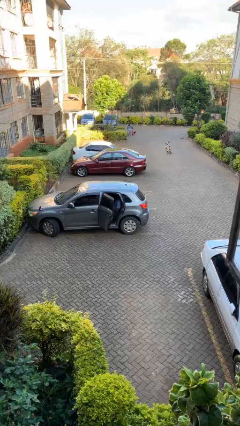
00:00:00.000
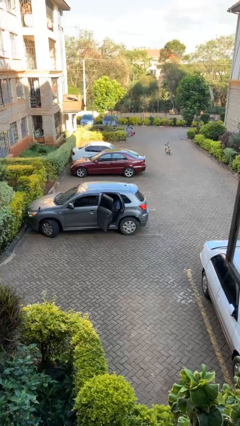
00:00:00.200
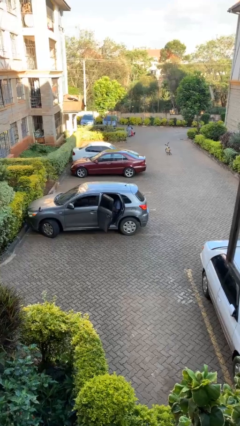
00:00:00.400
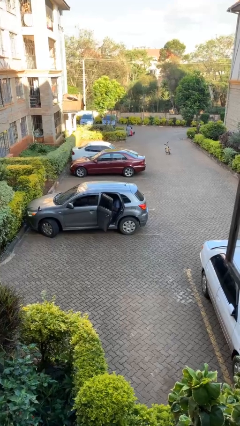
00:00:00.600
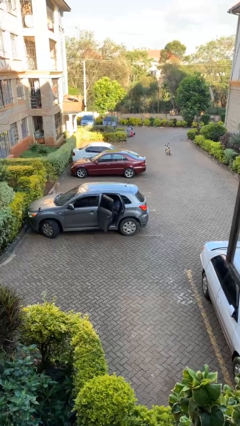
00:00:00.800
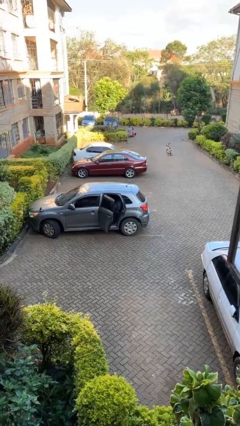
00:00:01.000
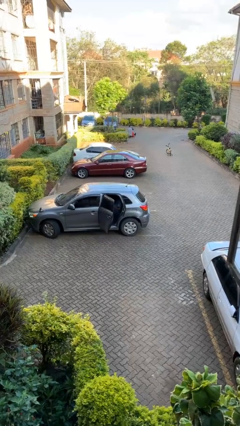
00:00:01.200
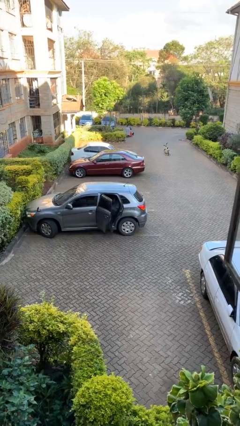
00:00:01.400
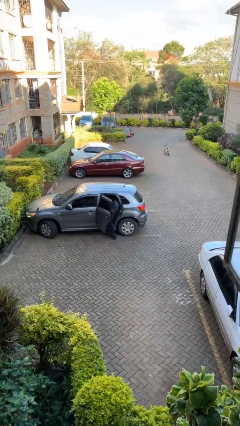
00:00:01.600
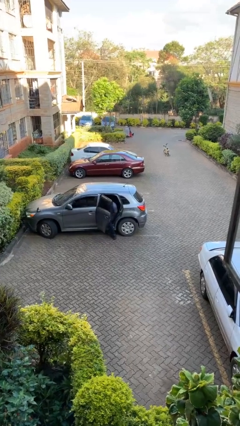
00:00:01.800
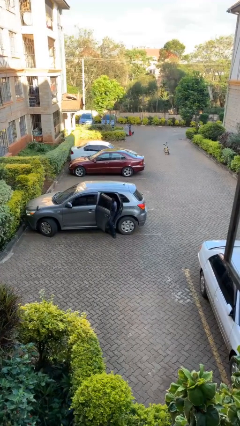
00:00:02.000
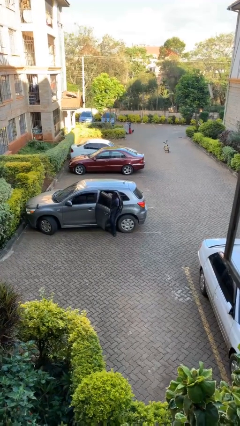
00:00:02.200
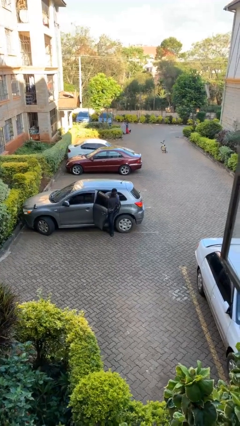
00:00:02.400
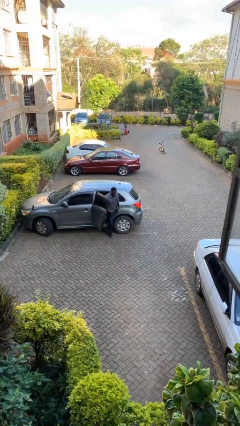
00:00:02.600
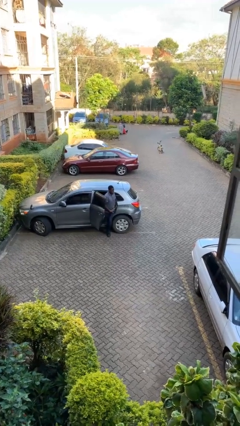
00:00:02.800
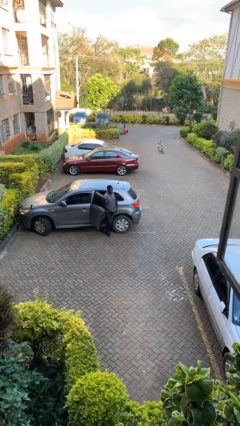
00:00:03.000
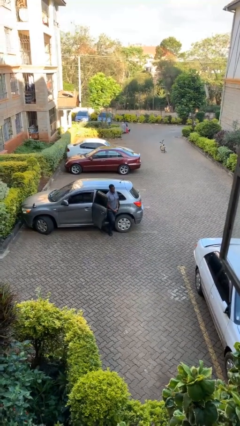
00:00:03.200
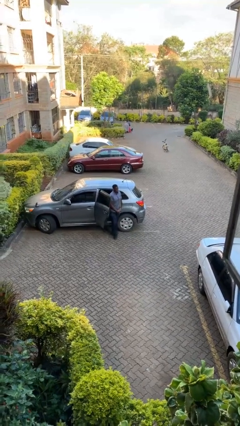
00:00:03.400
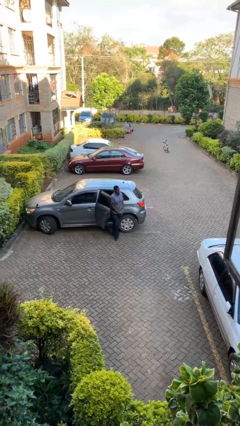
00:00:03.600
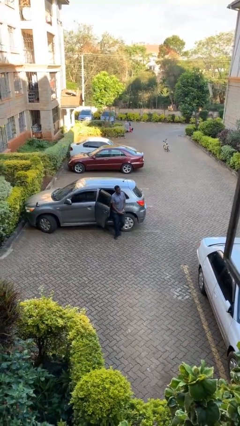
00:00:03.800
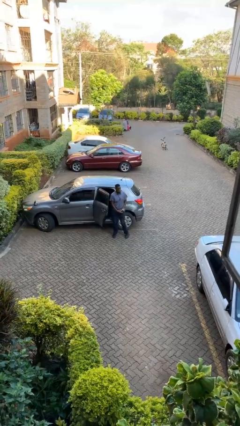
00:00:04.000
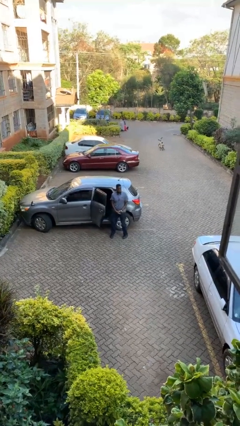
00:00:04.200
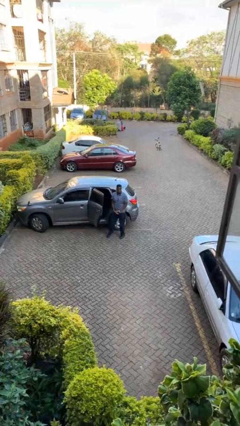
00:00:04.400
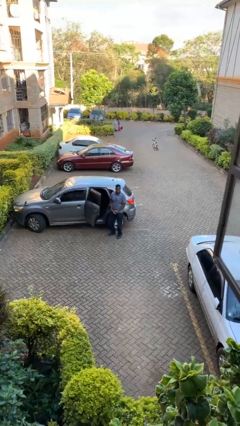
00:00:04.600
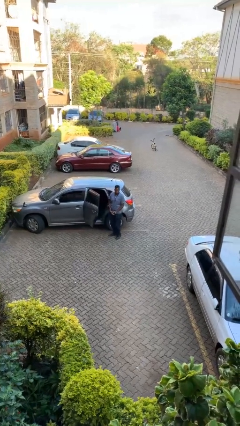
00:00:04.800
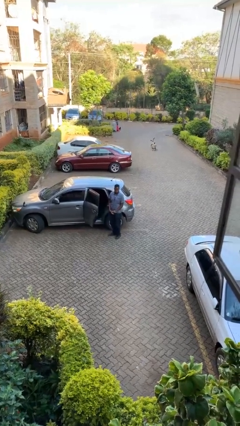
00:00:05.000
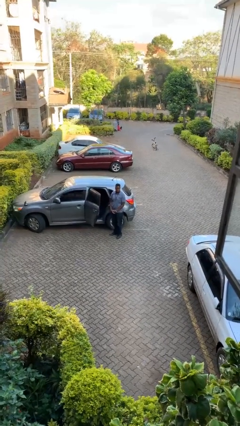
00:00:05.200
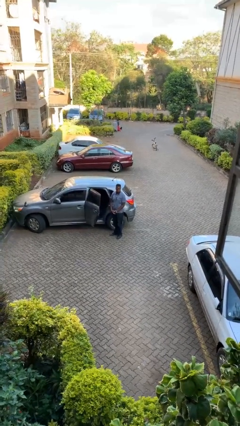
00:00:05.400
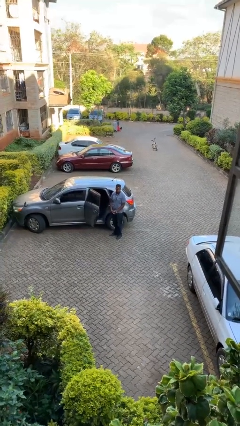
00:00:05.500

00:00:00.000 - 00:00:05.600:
person exits car

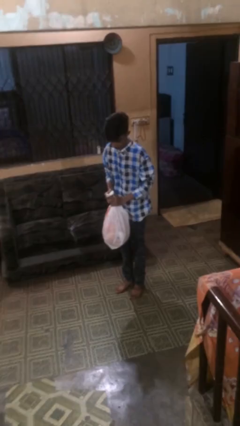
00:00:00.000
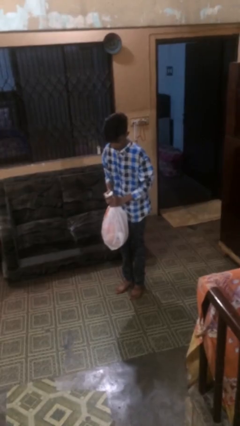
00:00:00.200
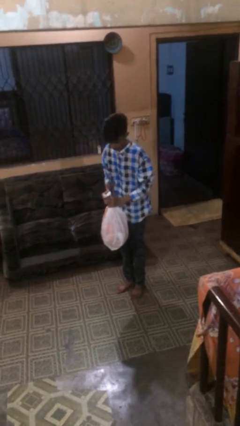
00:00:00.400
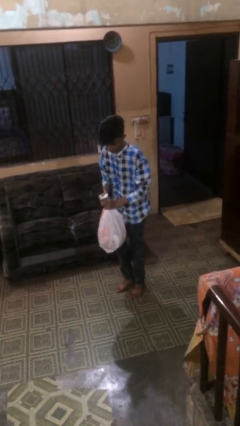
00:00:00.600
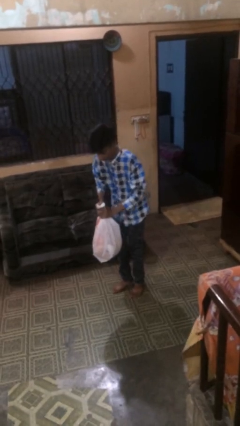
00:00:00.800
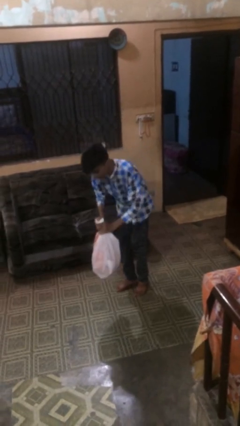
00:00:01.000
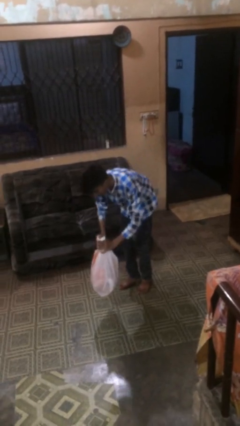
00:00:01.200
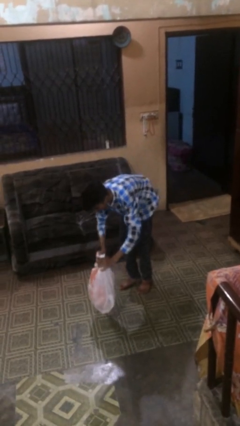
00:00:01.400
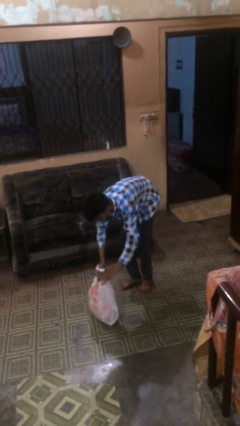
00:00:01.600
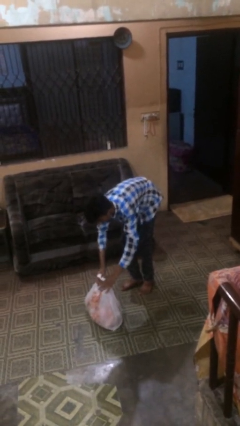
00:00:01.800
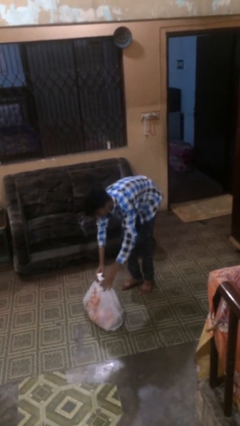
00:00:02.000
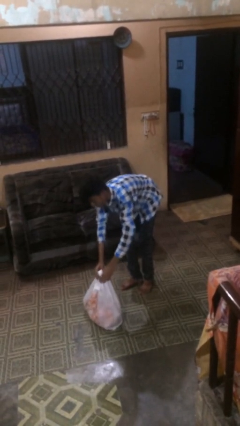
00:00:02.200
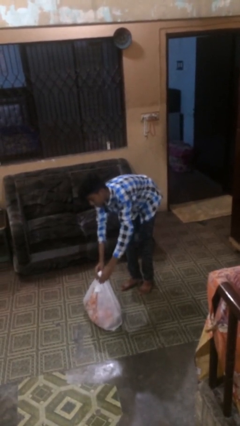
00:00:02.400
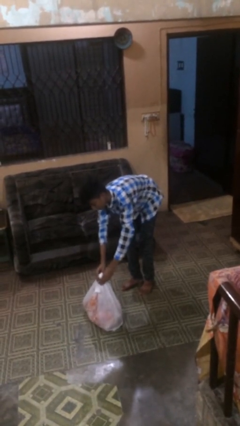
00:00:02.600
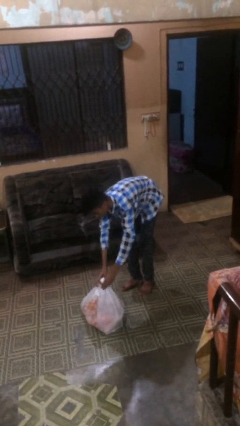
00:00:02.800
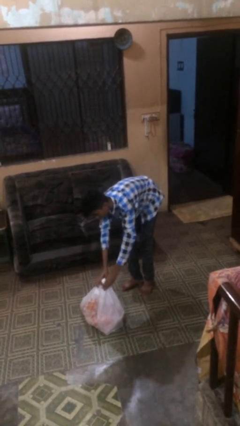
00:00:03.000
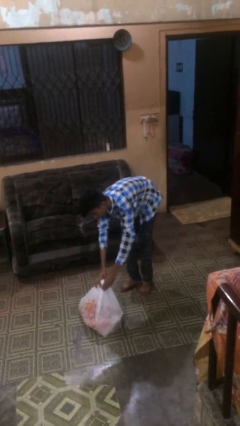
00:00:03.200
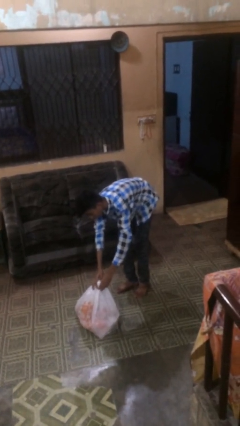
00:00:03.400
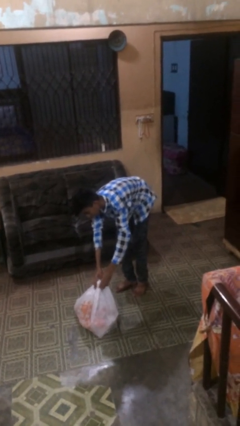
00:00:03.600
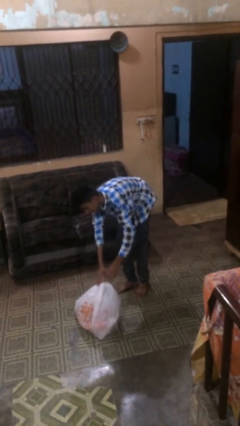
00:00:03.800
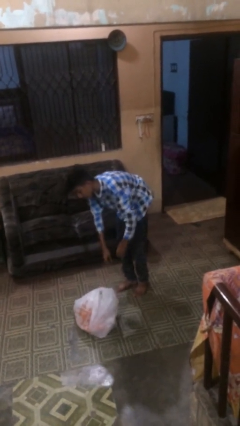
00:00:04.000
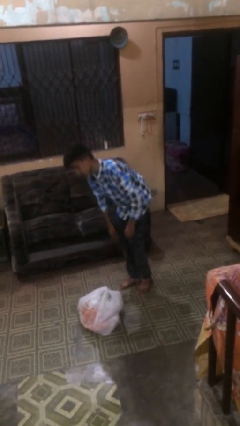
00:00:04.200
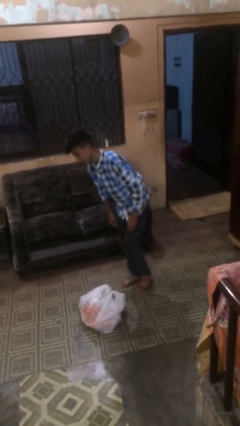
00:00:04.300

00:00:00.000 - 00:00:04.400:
person puts down object on floor

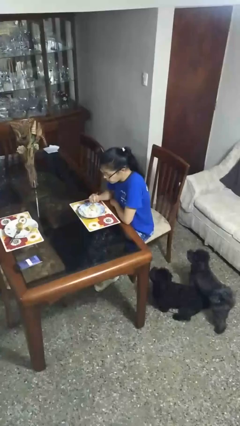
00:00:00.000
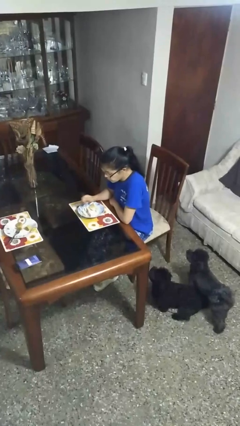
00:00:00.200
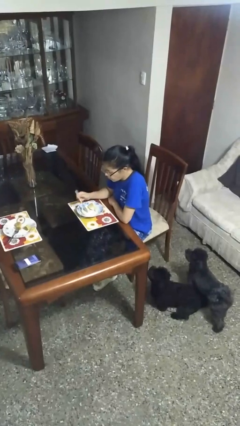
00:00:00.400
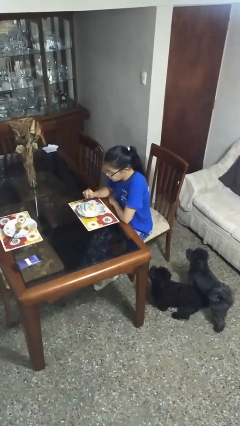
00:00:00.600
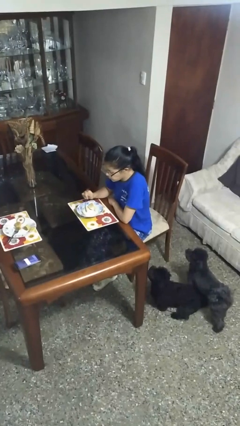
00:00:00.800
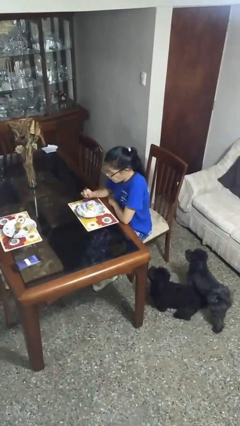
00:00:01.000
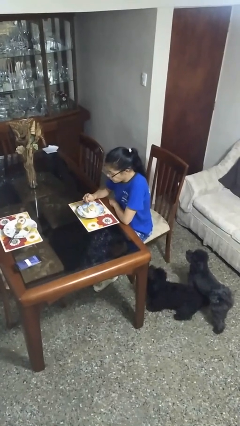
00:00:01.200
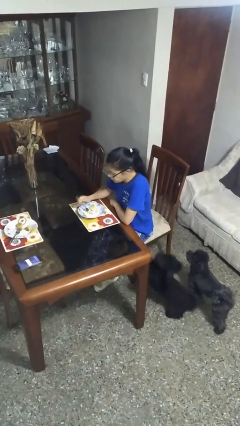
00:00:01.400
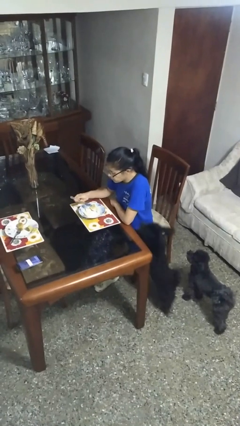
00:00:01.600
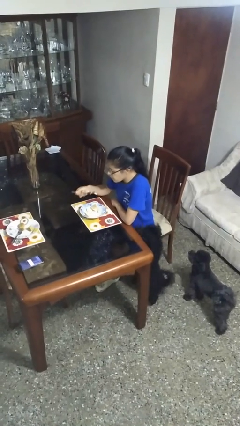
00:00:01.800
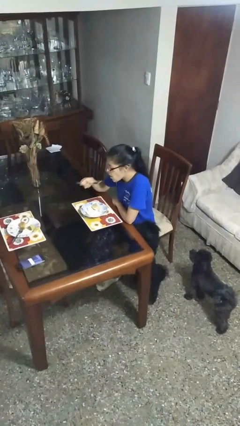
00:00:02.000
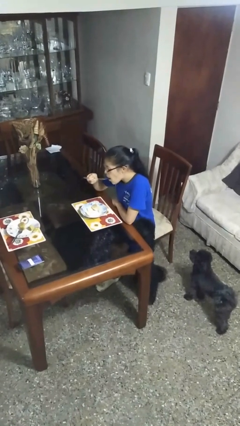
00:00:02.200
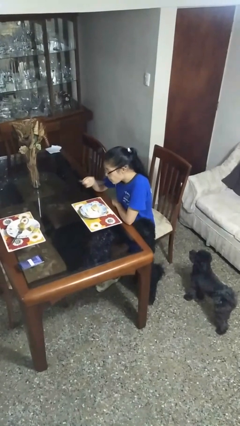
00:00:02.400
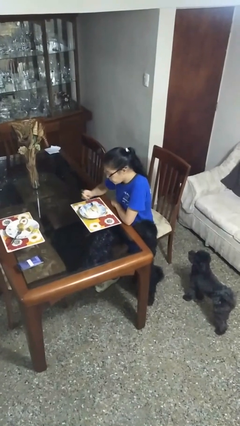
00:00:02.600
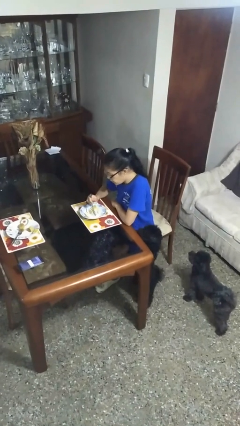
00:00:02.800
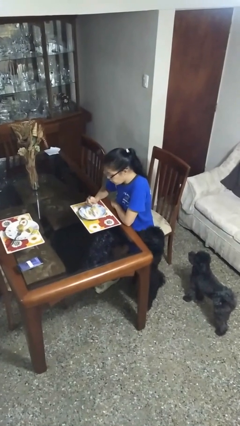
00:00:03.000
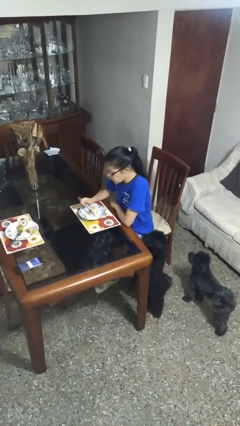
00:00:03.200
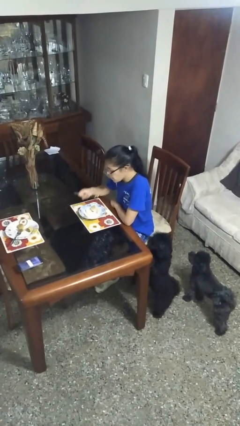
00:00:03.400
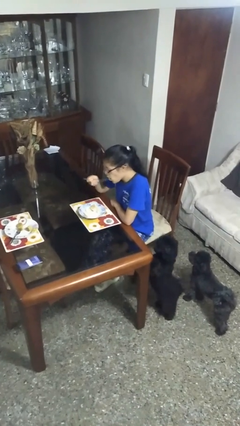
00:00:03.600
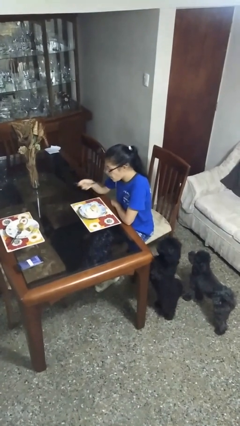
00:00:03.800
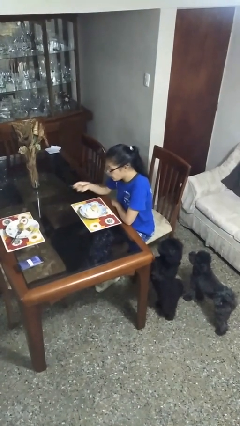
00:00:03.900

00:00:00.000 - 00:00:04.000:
person eats with utensil

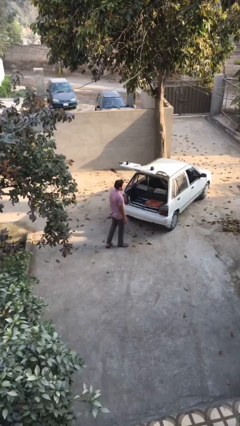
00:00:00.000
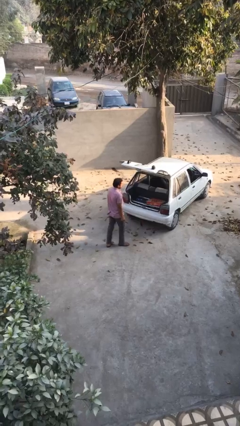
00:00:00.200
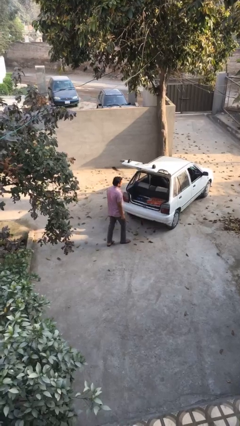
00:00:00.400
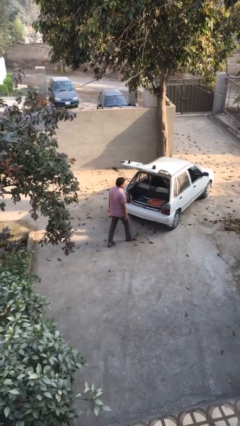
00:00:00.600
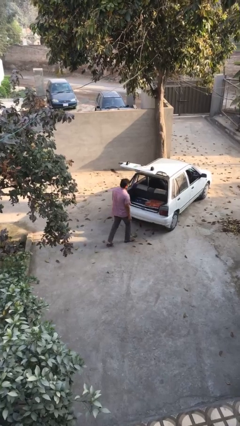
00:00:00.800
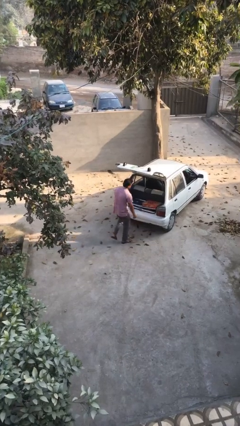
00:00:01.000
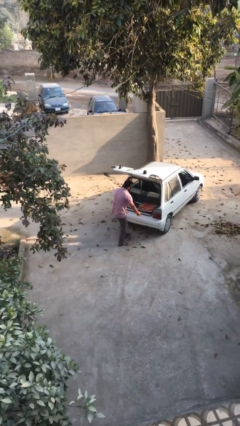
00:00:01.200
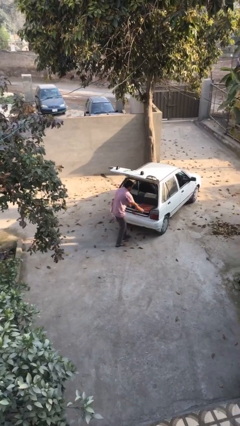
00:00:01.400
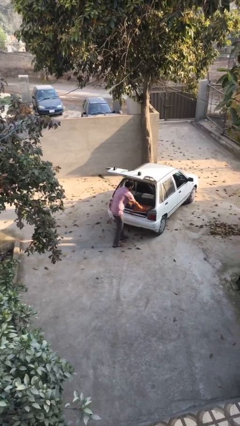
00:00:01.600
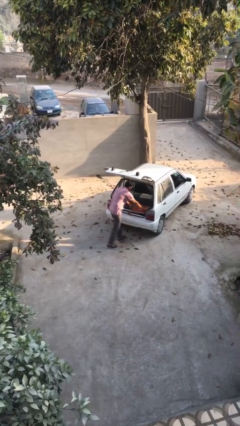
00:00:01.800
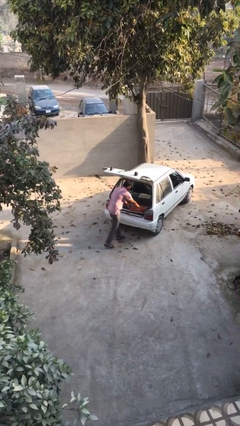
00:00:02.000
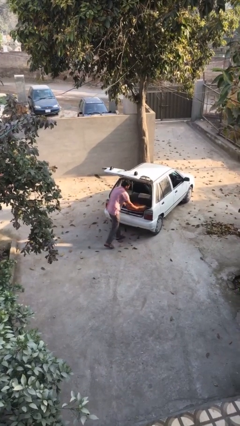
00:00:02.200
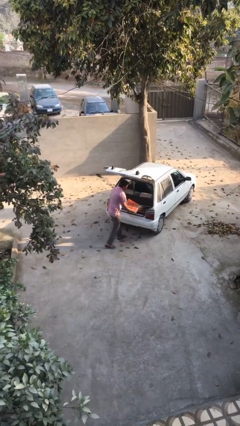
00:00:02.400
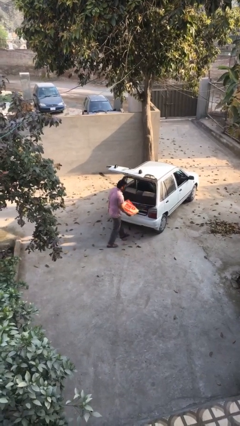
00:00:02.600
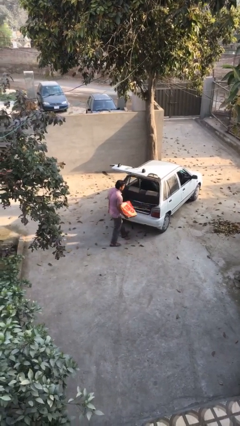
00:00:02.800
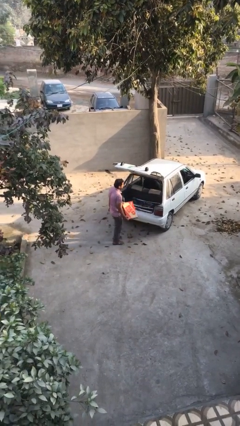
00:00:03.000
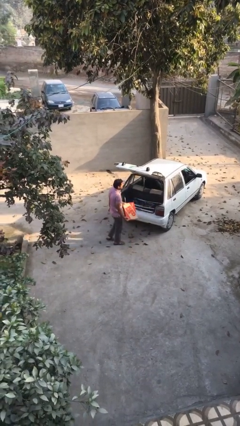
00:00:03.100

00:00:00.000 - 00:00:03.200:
person unloads car

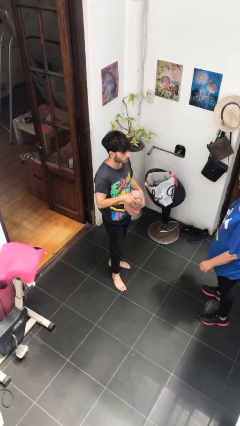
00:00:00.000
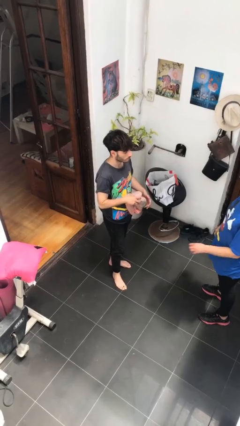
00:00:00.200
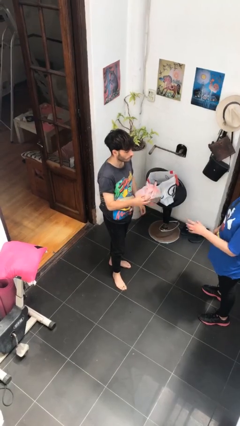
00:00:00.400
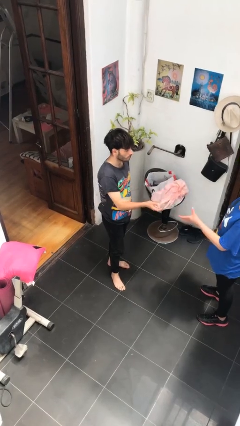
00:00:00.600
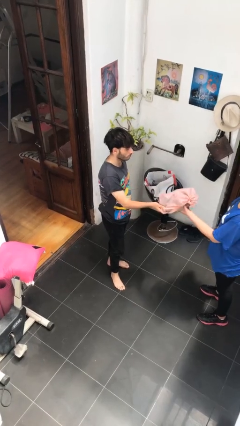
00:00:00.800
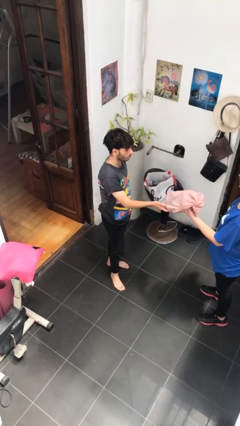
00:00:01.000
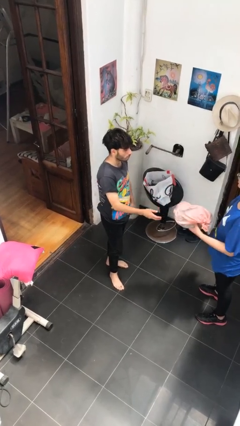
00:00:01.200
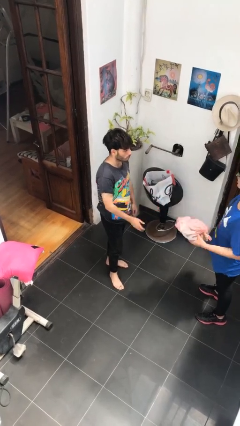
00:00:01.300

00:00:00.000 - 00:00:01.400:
person transfers object to person
